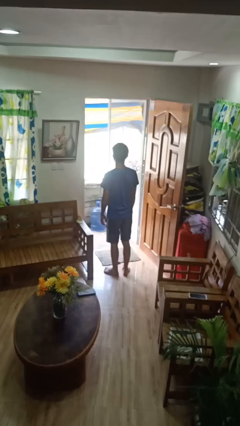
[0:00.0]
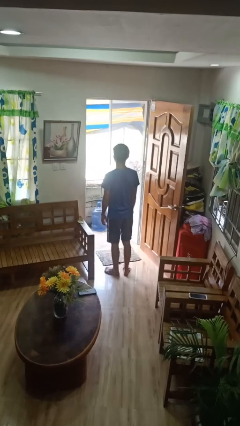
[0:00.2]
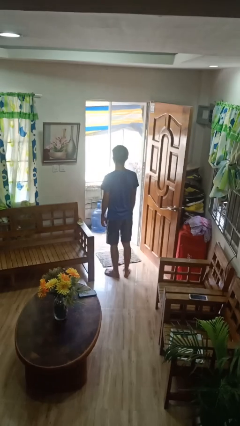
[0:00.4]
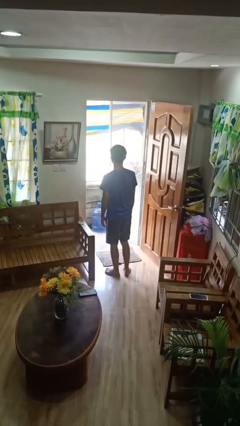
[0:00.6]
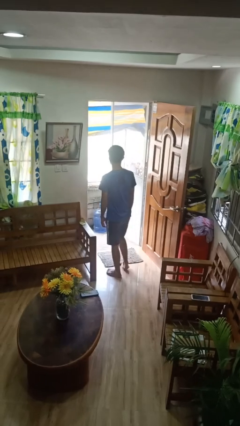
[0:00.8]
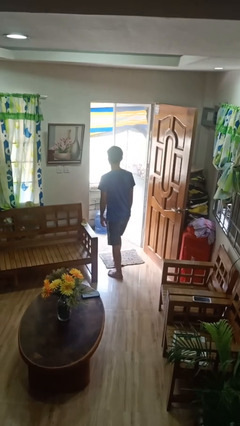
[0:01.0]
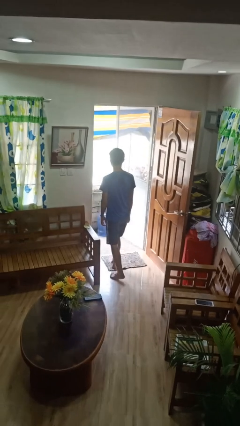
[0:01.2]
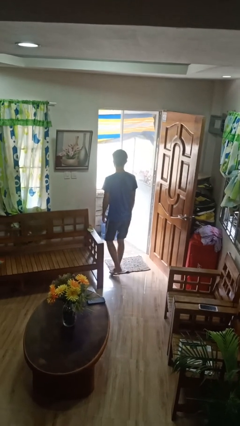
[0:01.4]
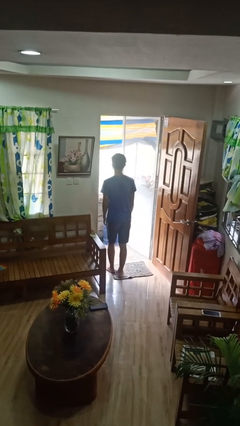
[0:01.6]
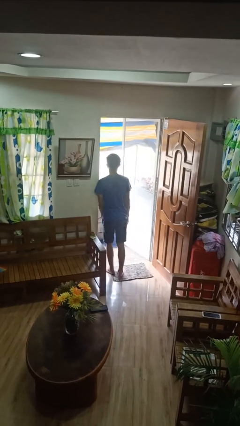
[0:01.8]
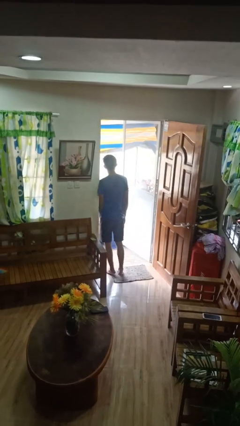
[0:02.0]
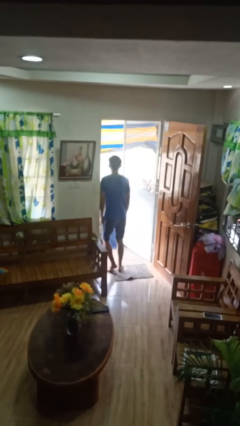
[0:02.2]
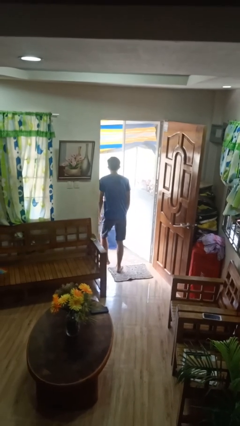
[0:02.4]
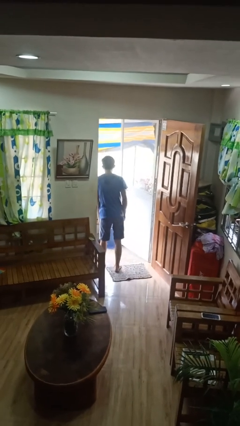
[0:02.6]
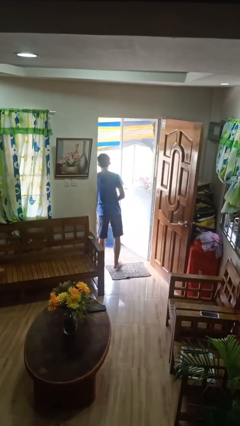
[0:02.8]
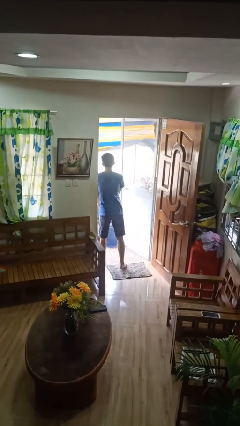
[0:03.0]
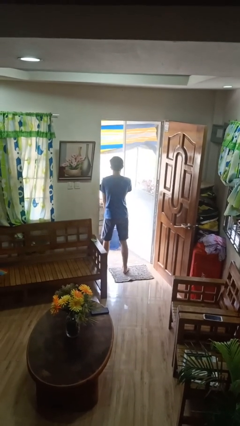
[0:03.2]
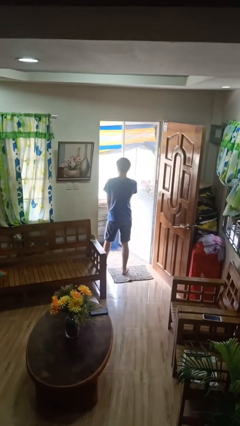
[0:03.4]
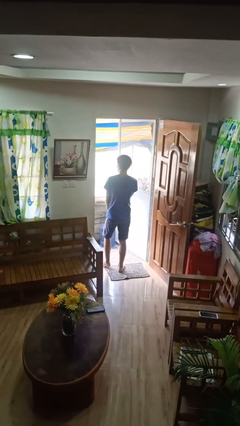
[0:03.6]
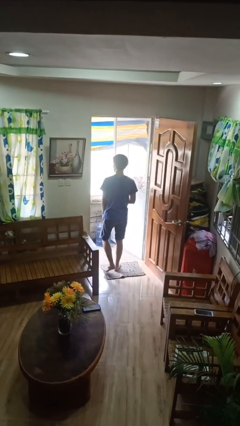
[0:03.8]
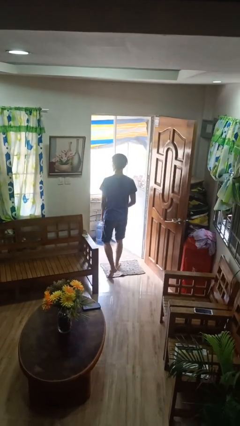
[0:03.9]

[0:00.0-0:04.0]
person bumps into wall

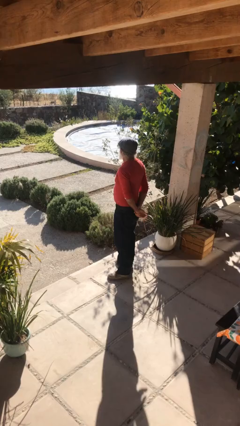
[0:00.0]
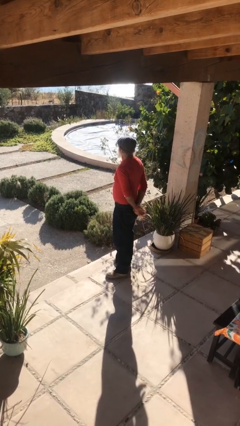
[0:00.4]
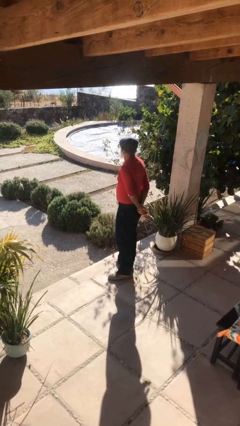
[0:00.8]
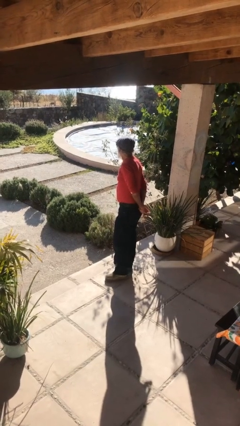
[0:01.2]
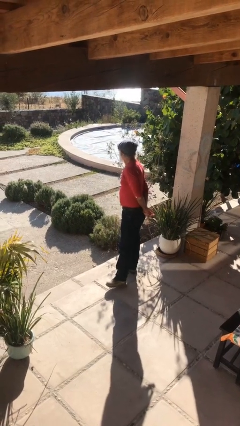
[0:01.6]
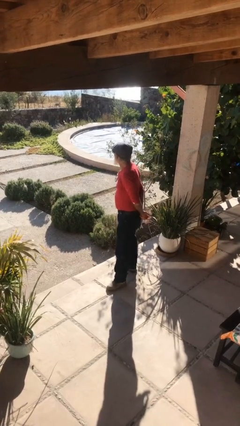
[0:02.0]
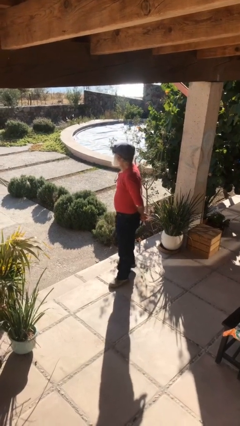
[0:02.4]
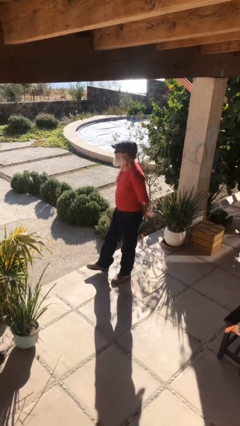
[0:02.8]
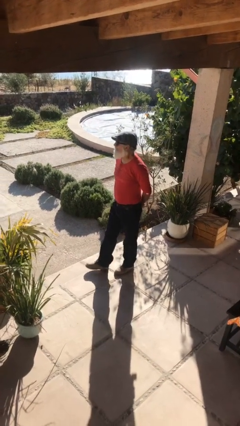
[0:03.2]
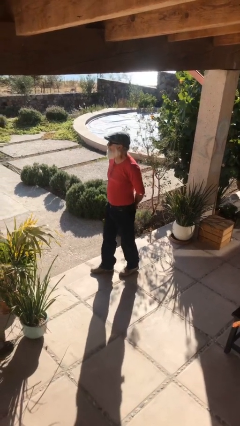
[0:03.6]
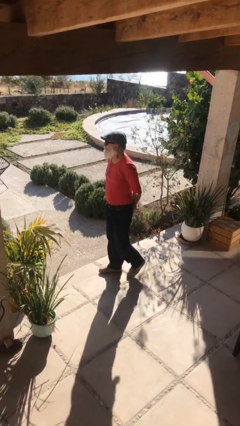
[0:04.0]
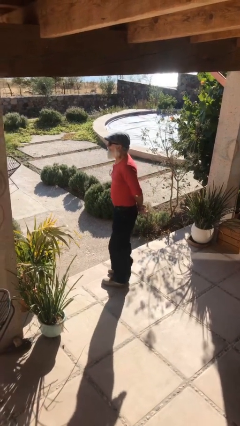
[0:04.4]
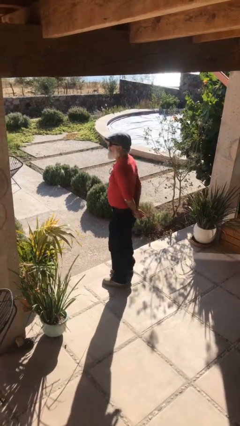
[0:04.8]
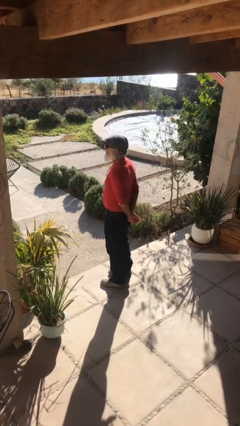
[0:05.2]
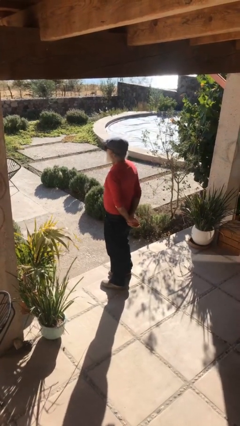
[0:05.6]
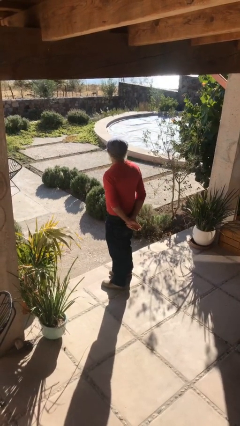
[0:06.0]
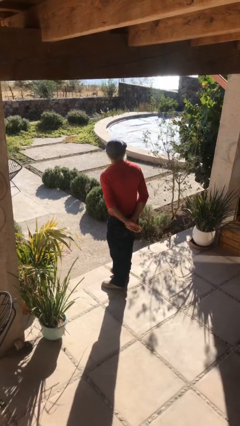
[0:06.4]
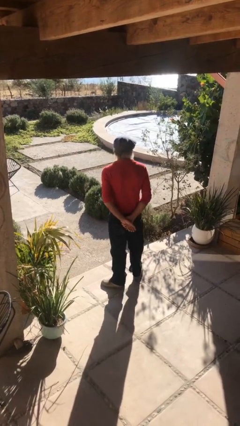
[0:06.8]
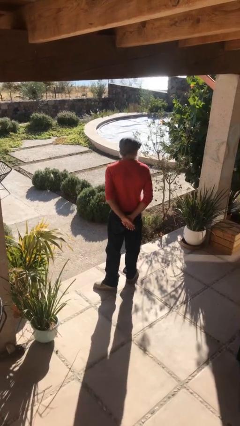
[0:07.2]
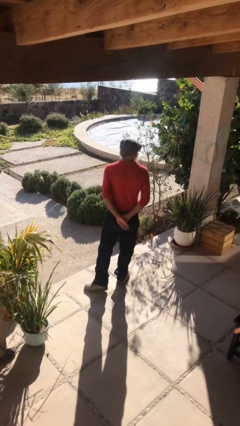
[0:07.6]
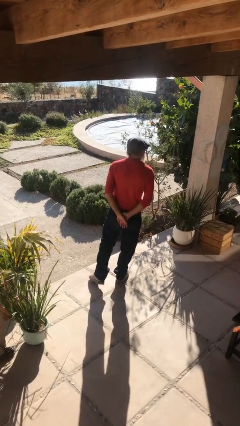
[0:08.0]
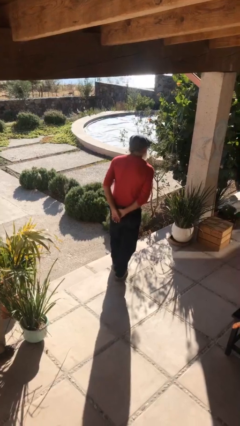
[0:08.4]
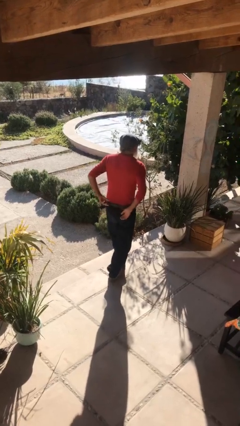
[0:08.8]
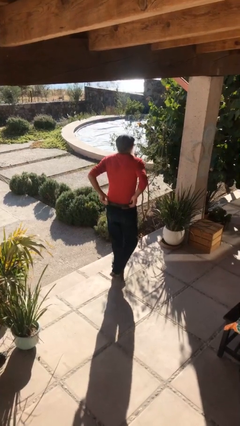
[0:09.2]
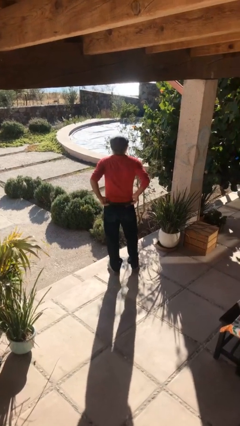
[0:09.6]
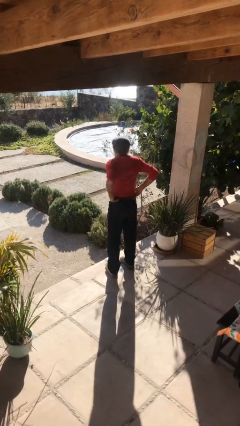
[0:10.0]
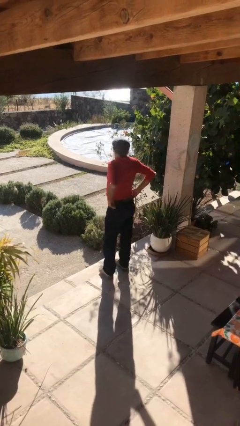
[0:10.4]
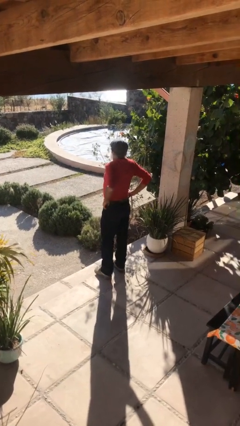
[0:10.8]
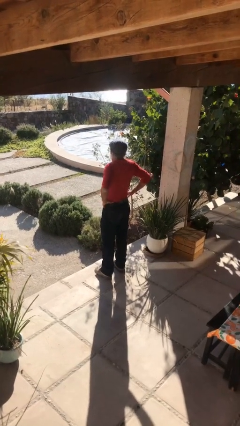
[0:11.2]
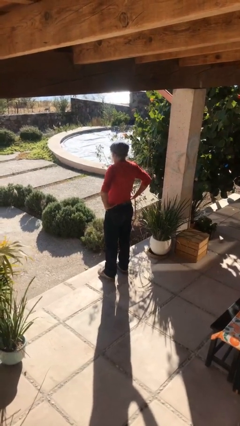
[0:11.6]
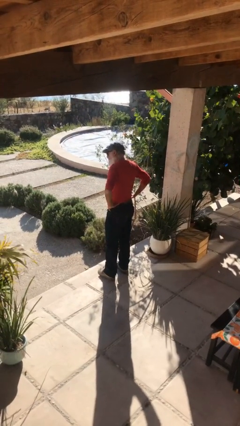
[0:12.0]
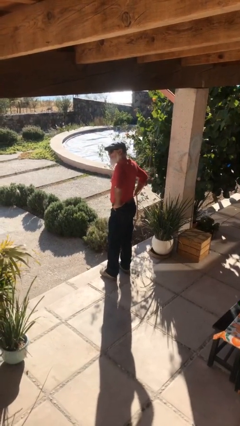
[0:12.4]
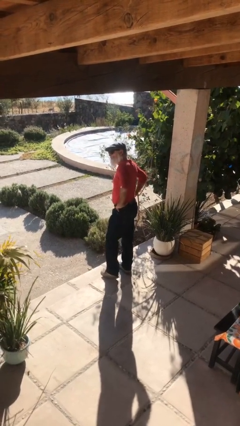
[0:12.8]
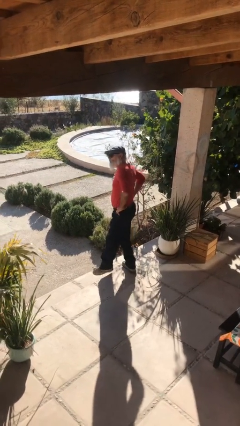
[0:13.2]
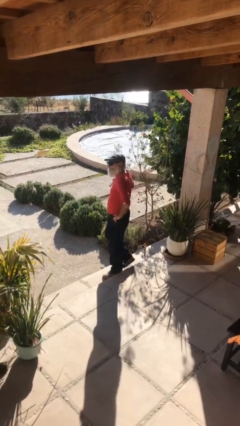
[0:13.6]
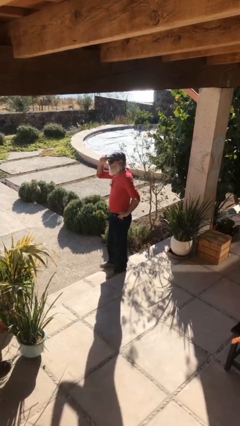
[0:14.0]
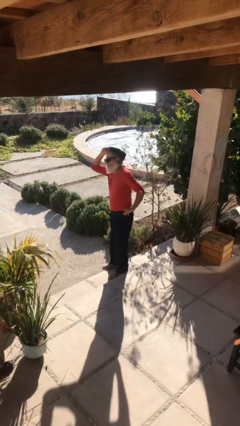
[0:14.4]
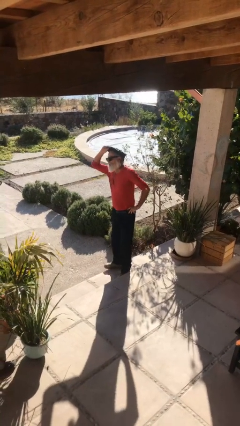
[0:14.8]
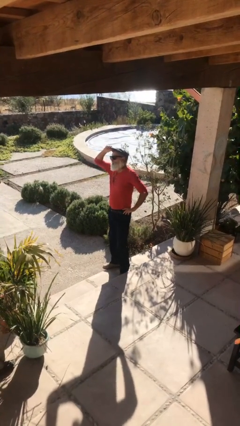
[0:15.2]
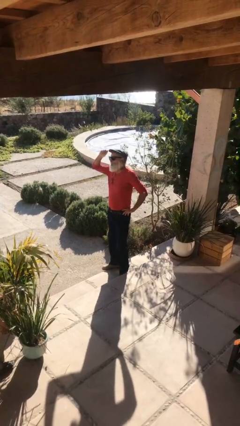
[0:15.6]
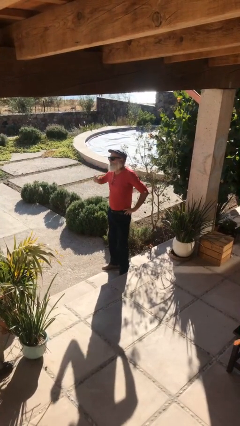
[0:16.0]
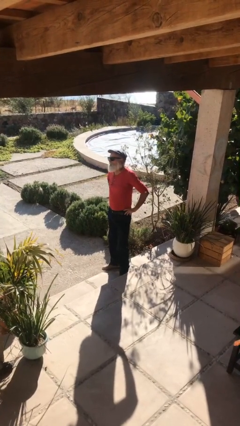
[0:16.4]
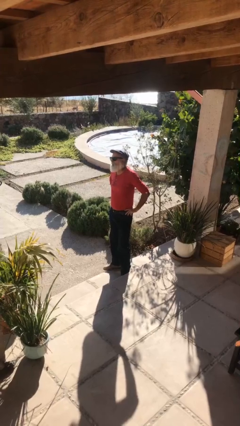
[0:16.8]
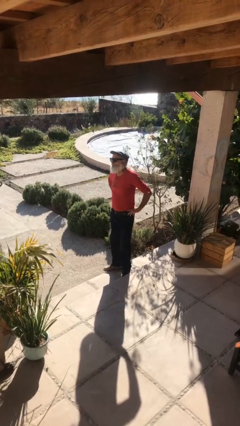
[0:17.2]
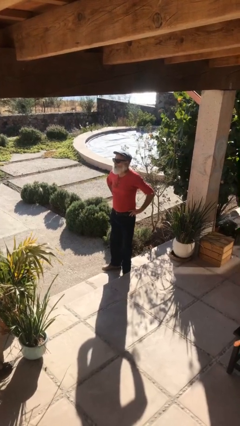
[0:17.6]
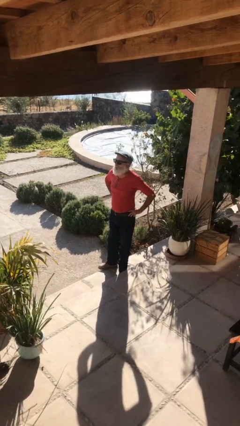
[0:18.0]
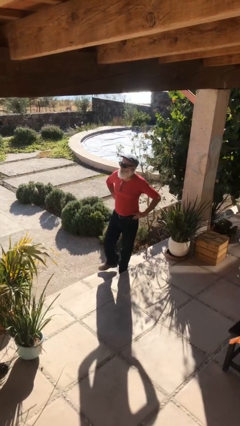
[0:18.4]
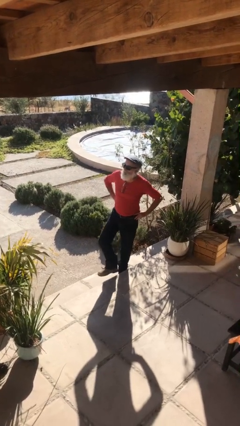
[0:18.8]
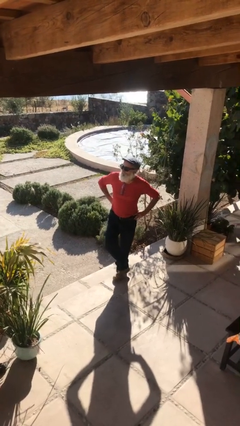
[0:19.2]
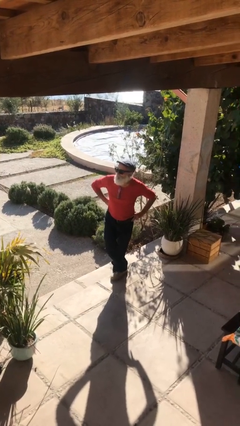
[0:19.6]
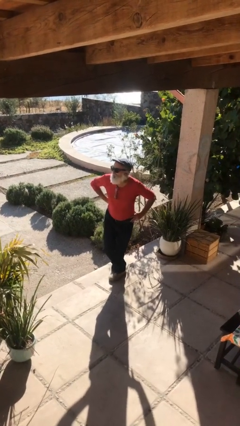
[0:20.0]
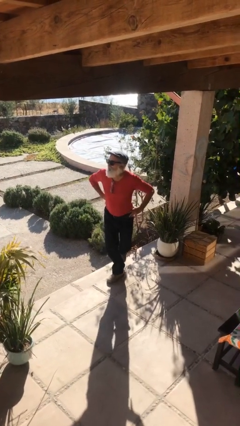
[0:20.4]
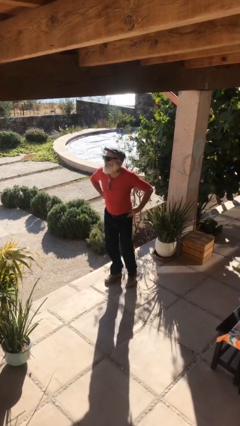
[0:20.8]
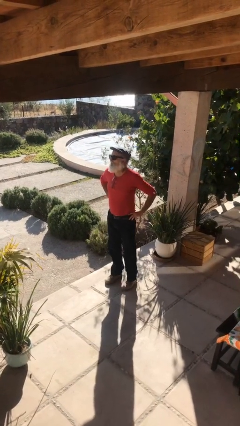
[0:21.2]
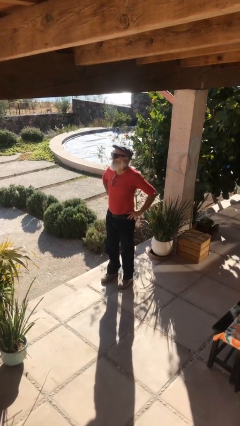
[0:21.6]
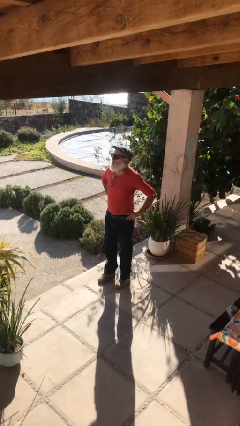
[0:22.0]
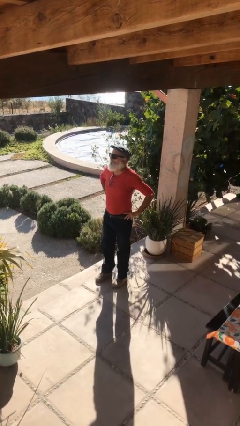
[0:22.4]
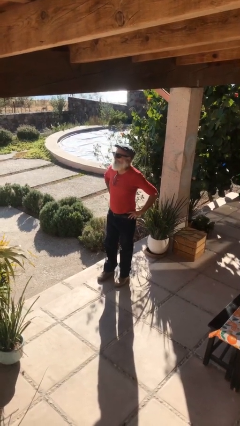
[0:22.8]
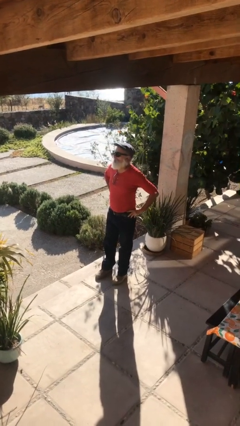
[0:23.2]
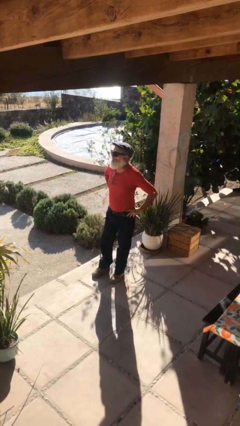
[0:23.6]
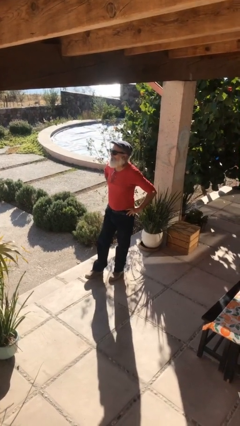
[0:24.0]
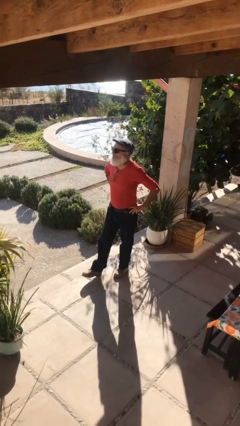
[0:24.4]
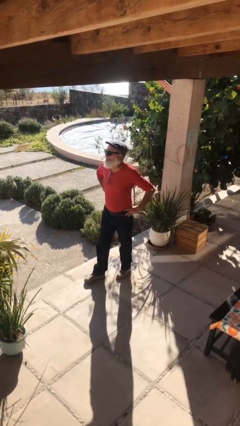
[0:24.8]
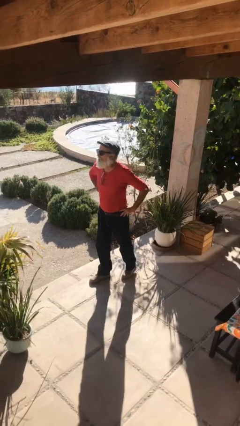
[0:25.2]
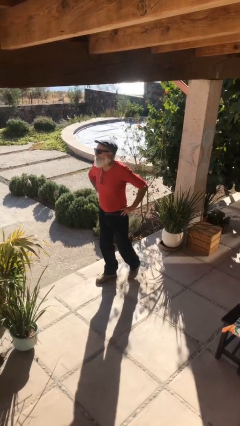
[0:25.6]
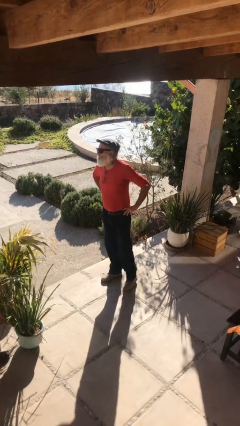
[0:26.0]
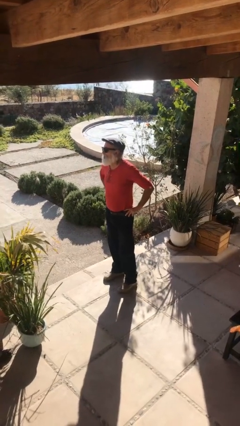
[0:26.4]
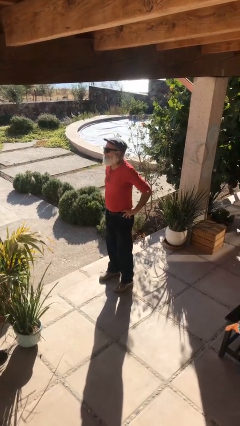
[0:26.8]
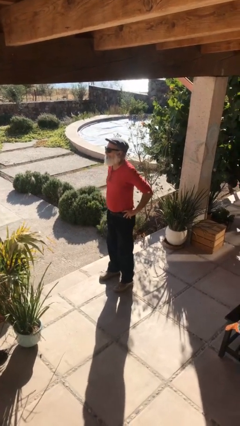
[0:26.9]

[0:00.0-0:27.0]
person walks
